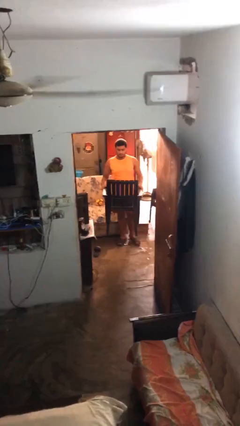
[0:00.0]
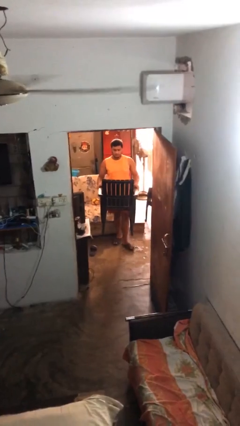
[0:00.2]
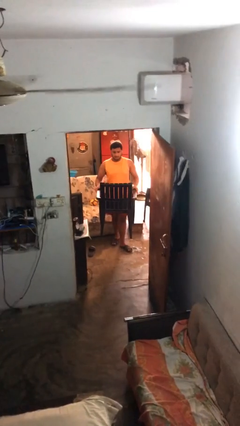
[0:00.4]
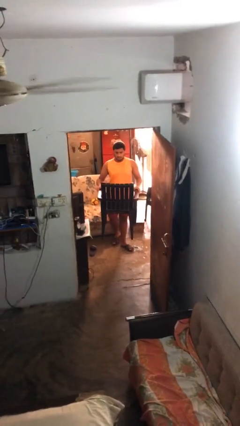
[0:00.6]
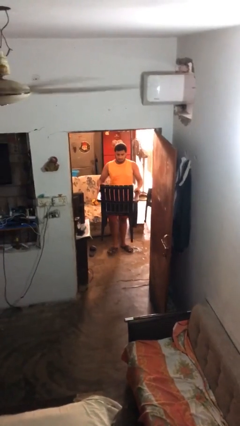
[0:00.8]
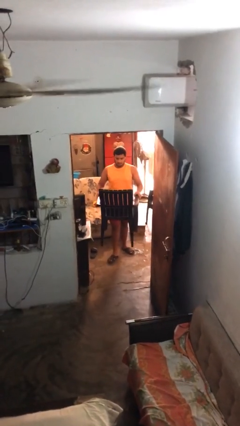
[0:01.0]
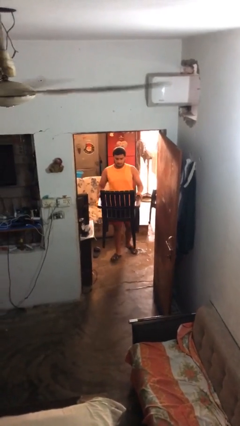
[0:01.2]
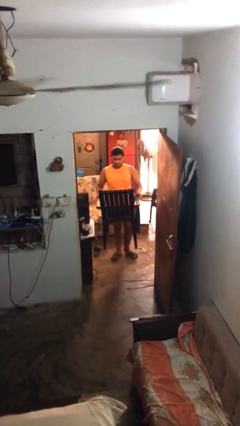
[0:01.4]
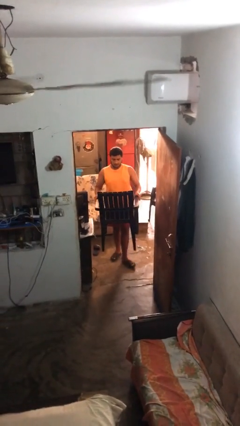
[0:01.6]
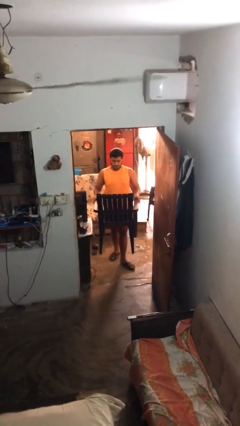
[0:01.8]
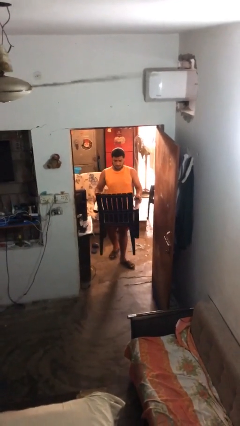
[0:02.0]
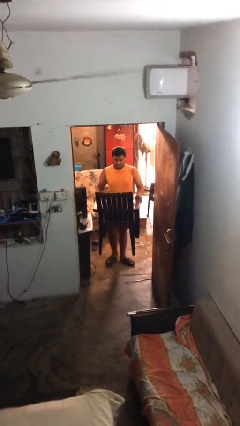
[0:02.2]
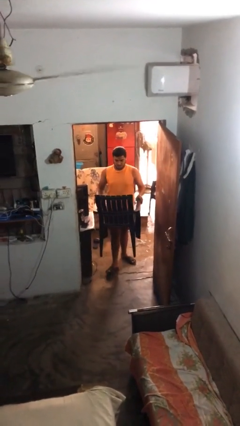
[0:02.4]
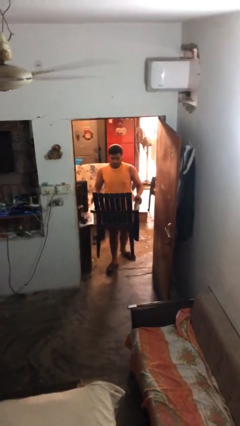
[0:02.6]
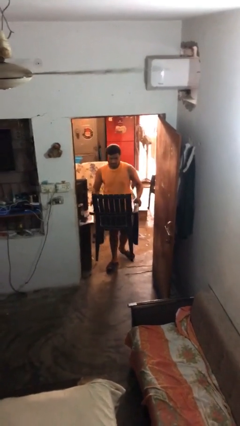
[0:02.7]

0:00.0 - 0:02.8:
person carries heavy object

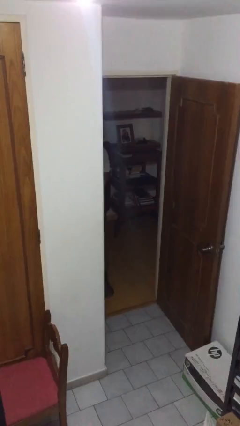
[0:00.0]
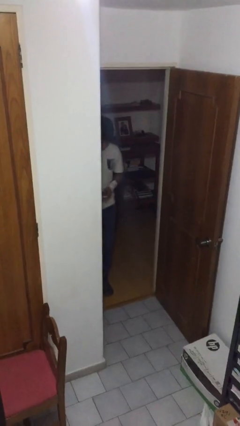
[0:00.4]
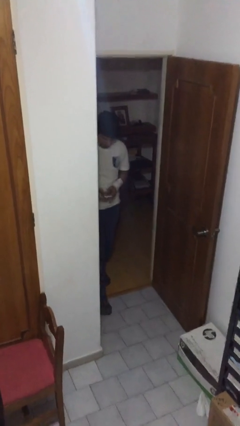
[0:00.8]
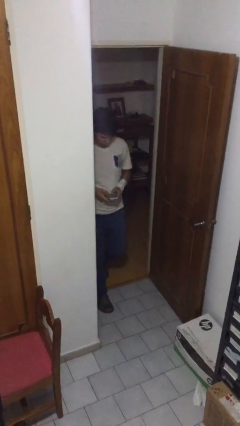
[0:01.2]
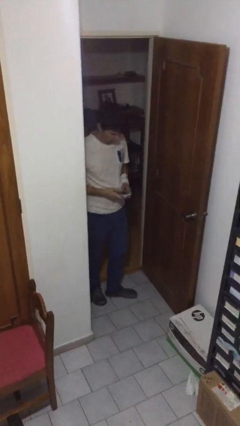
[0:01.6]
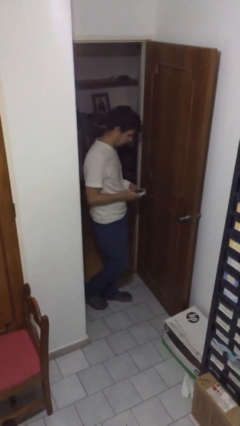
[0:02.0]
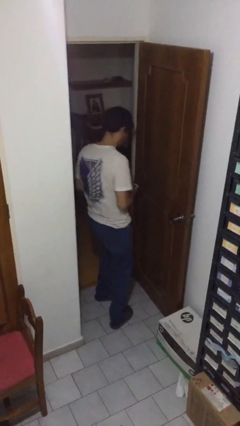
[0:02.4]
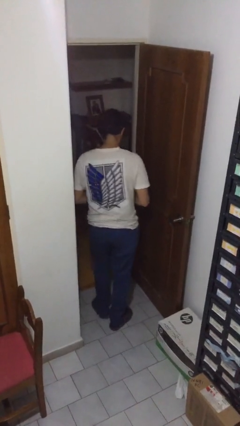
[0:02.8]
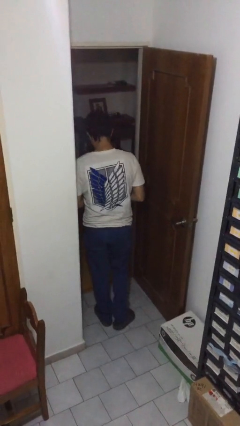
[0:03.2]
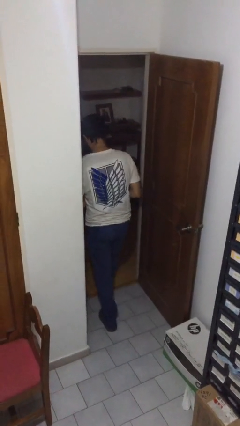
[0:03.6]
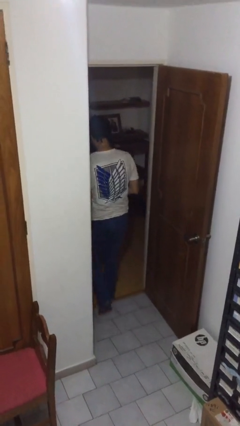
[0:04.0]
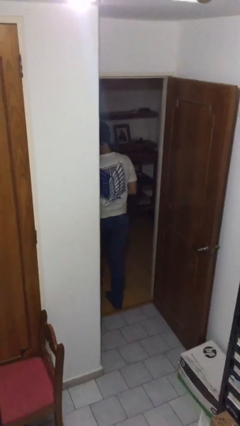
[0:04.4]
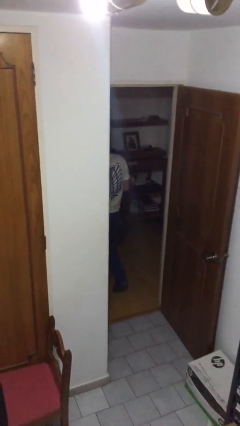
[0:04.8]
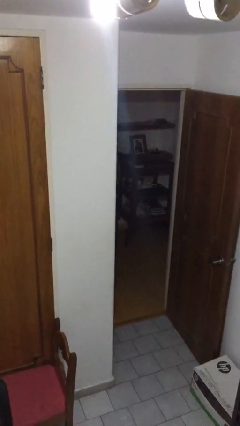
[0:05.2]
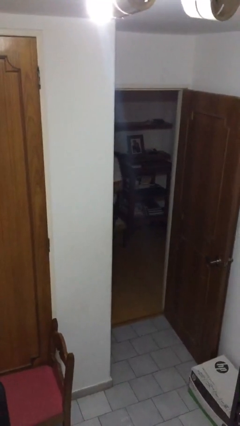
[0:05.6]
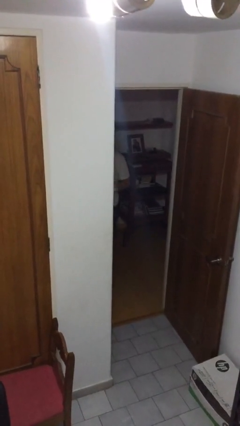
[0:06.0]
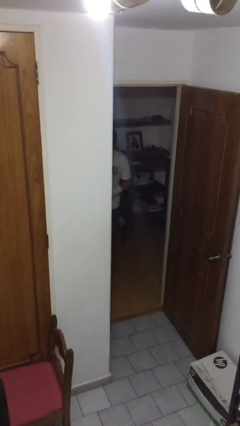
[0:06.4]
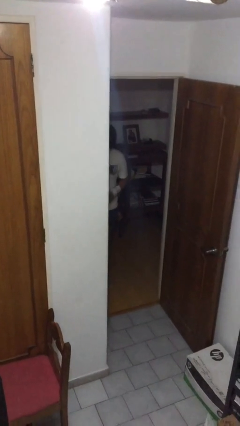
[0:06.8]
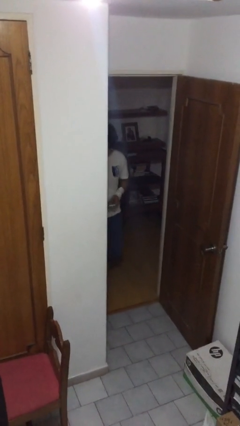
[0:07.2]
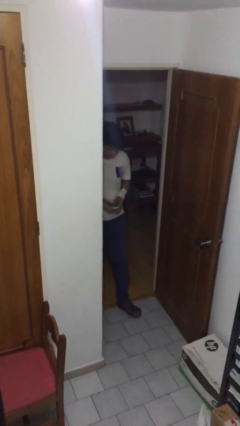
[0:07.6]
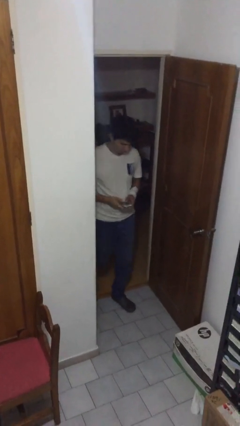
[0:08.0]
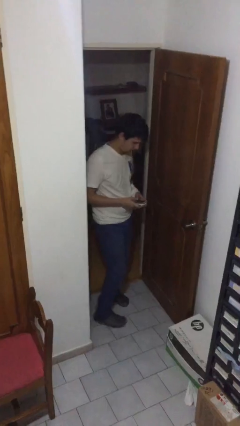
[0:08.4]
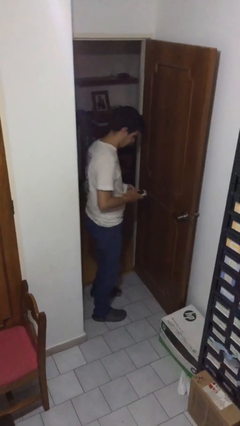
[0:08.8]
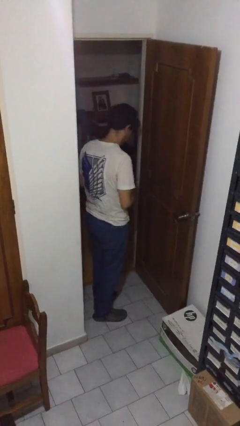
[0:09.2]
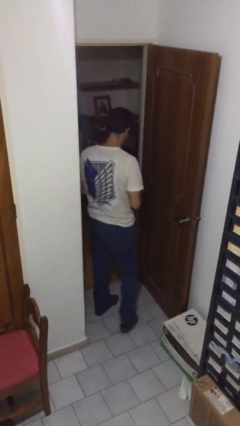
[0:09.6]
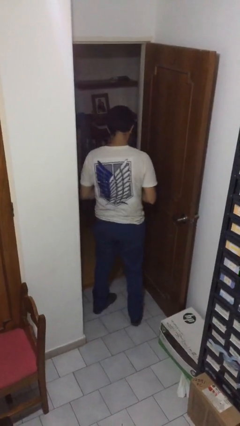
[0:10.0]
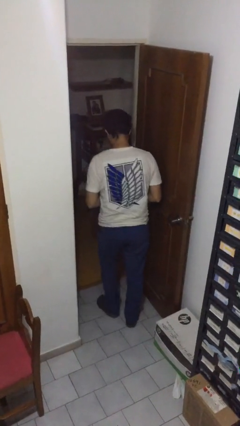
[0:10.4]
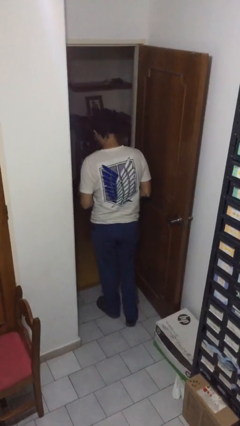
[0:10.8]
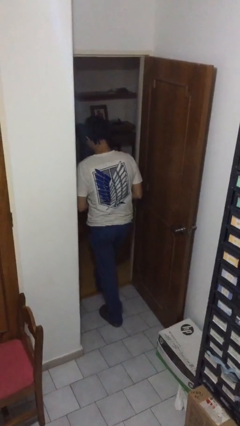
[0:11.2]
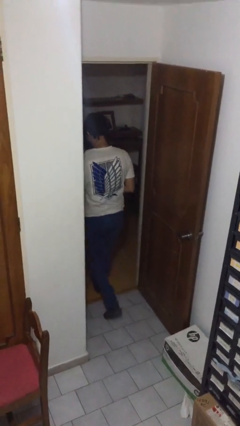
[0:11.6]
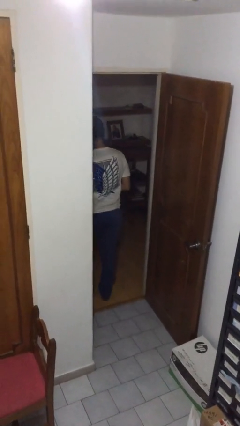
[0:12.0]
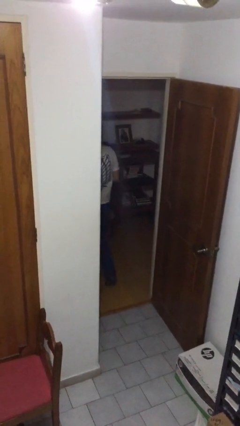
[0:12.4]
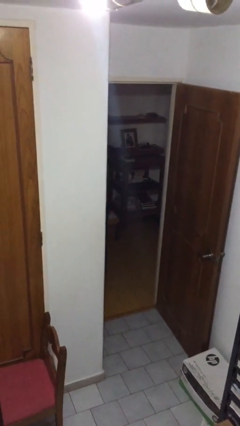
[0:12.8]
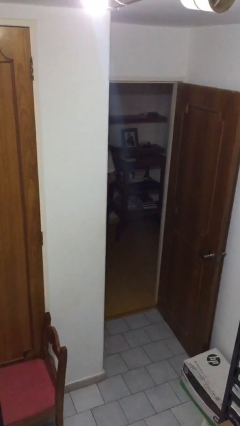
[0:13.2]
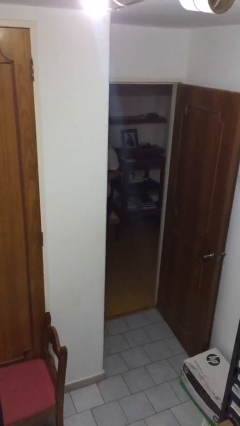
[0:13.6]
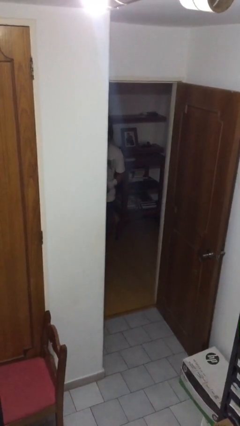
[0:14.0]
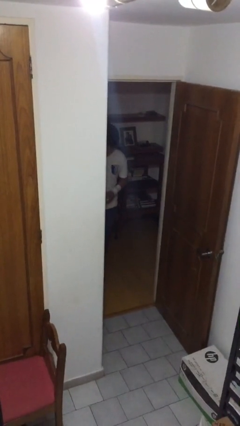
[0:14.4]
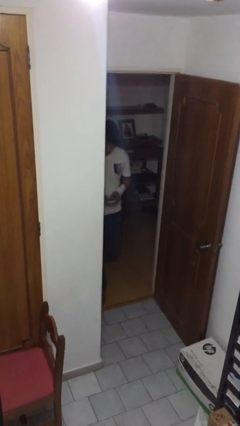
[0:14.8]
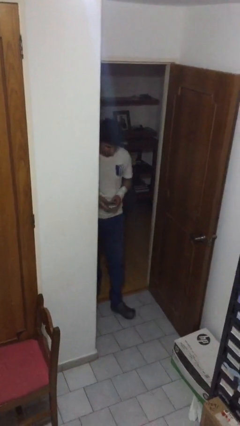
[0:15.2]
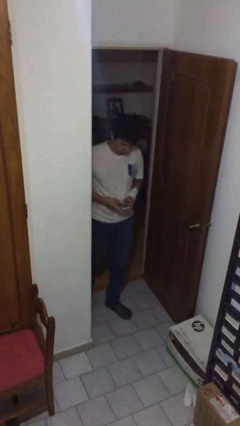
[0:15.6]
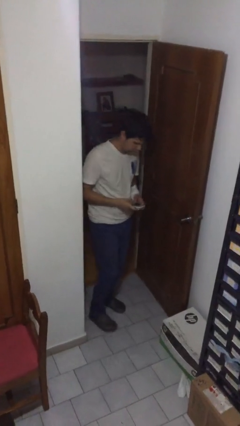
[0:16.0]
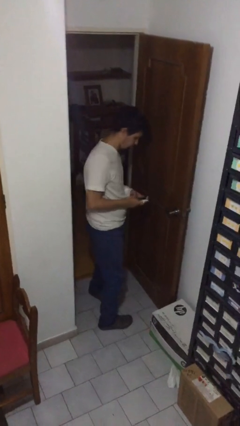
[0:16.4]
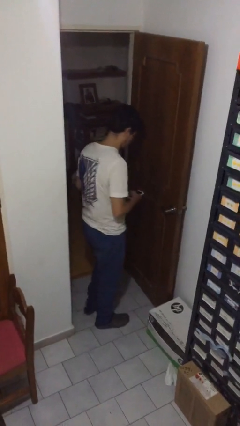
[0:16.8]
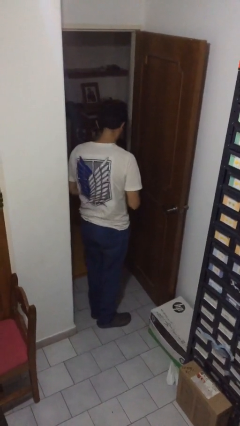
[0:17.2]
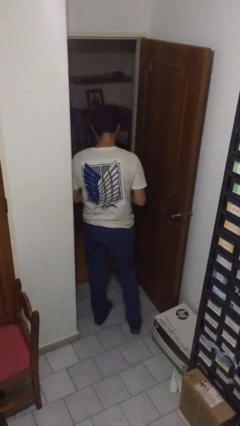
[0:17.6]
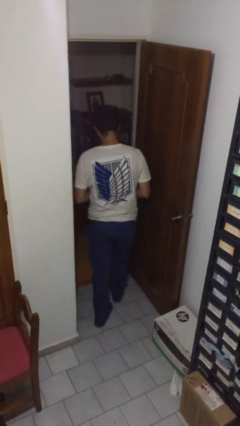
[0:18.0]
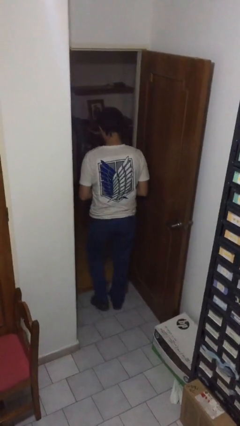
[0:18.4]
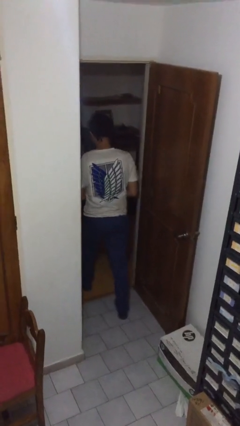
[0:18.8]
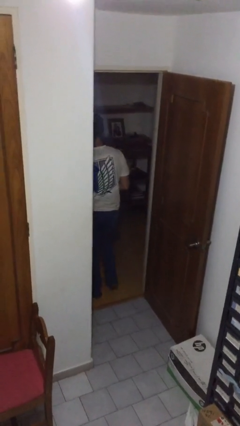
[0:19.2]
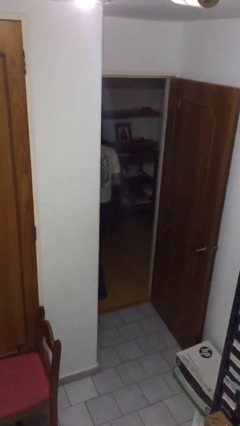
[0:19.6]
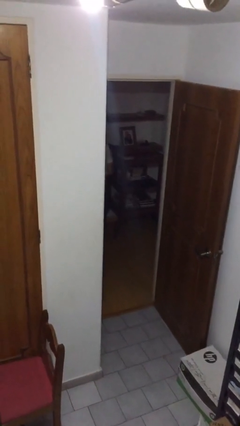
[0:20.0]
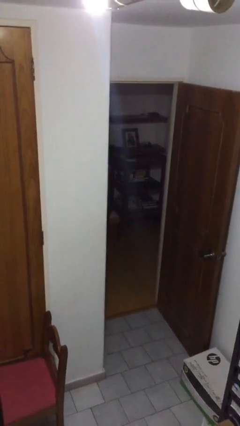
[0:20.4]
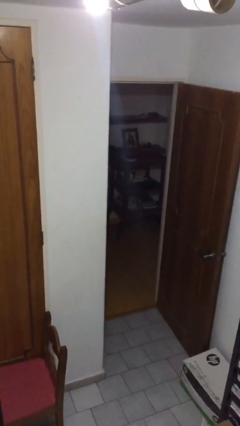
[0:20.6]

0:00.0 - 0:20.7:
person texts on phone

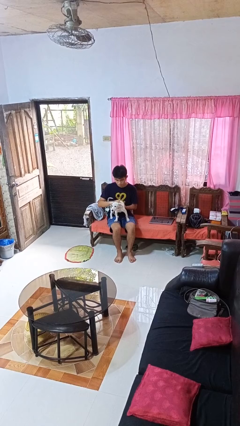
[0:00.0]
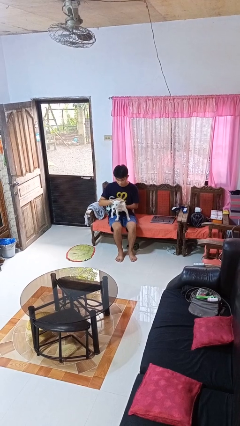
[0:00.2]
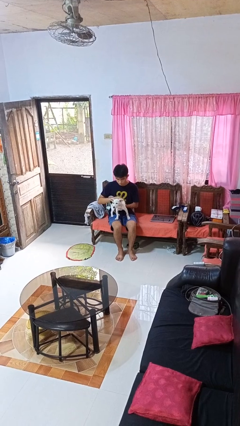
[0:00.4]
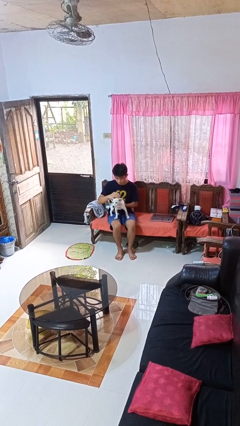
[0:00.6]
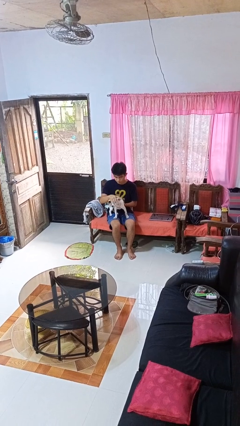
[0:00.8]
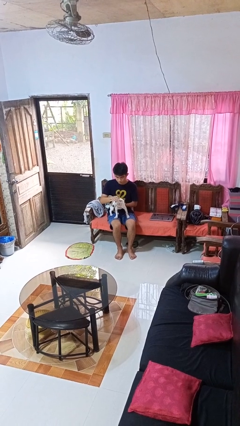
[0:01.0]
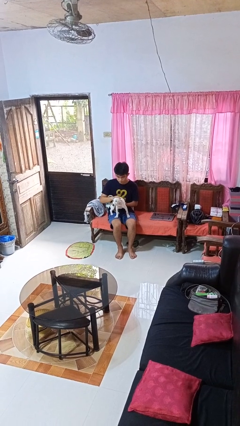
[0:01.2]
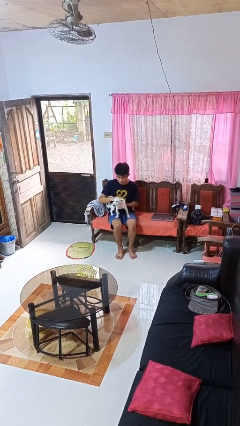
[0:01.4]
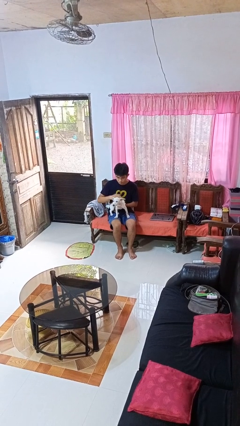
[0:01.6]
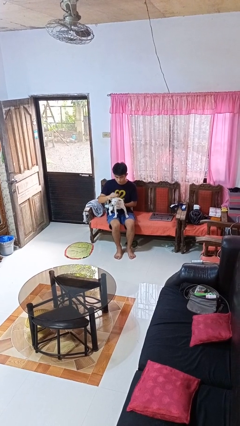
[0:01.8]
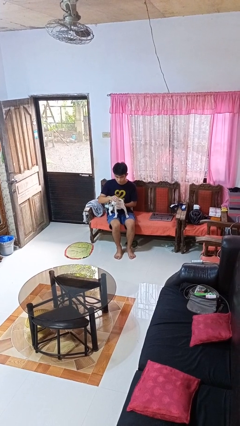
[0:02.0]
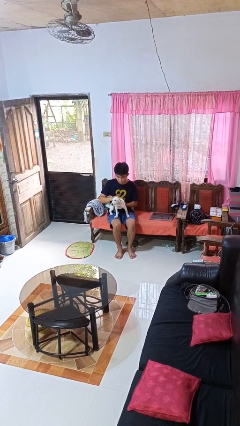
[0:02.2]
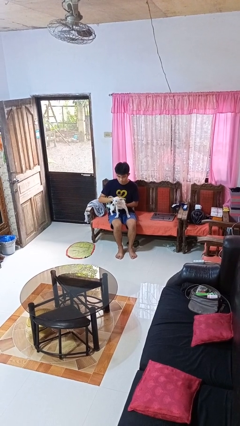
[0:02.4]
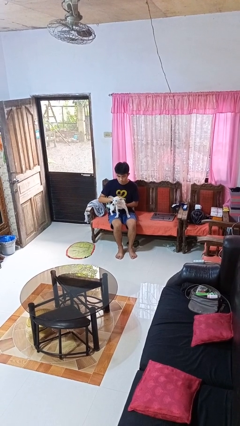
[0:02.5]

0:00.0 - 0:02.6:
person pets dog

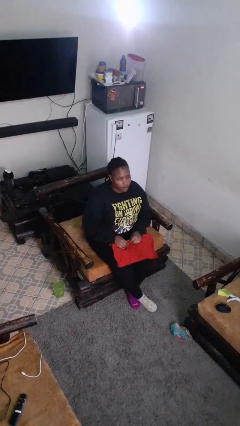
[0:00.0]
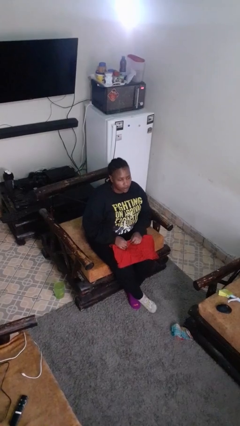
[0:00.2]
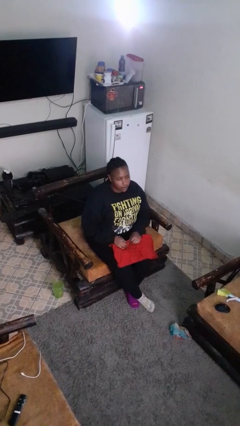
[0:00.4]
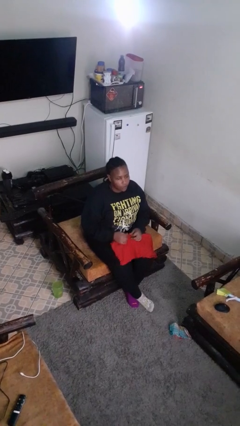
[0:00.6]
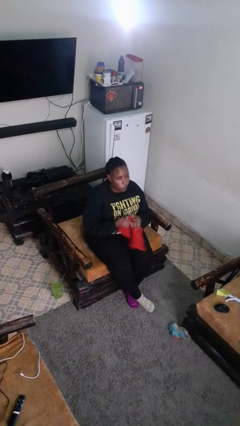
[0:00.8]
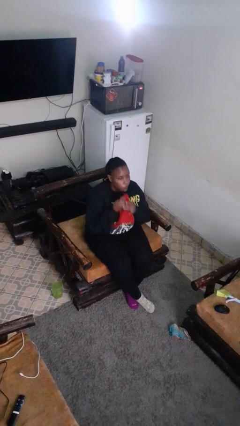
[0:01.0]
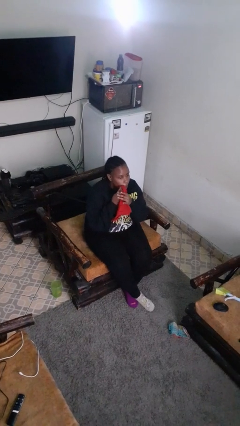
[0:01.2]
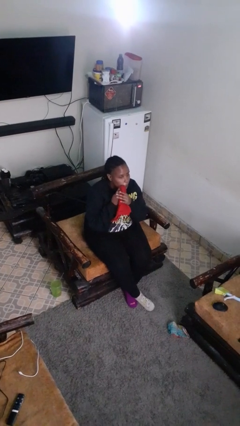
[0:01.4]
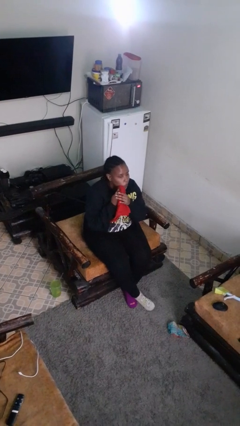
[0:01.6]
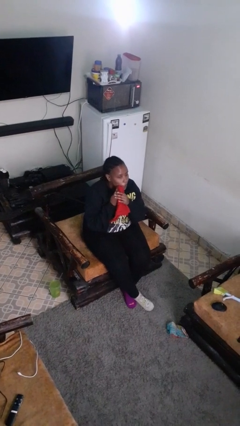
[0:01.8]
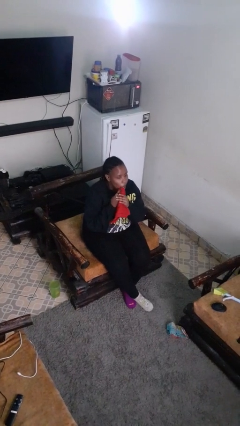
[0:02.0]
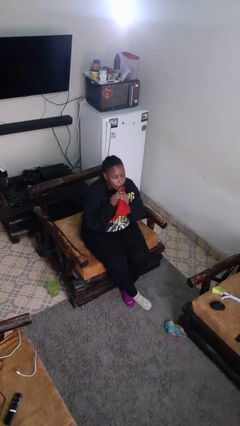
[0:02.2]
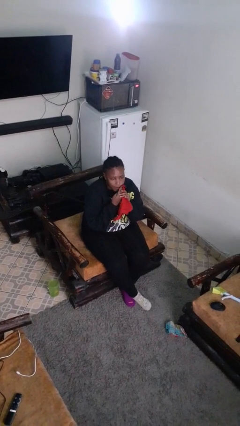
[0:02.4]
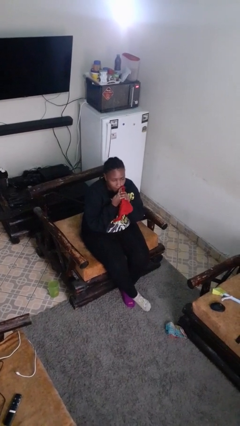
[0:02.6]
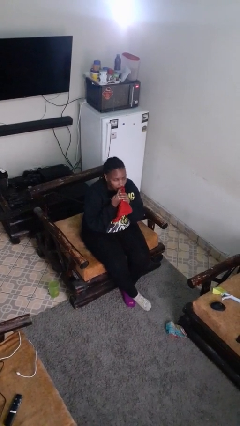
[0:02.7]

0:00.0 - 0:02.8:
person wipes mouth with napkin
